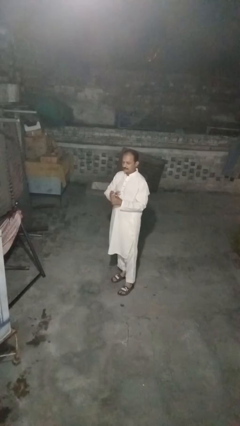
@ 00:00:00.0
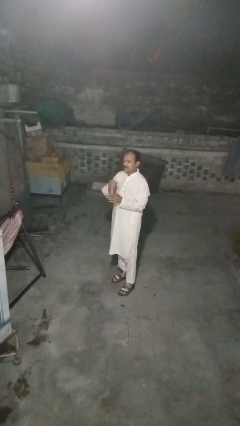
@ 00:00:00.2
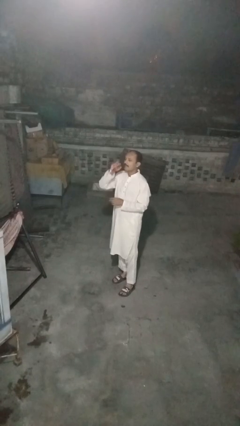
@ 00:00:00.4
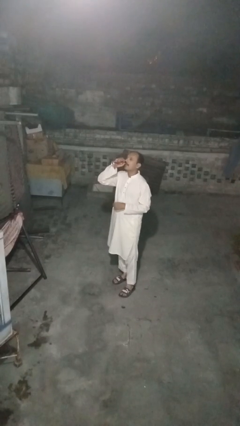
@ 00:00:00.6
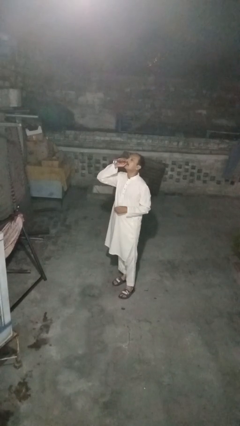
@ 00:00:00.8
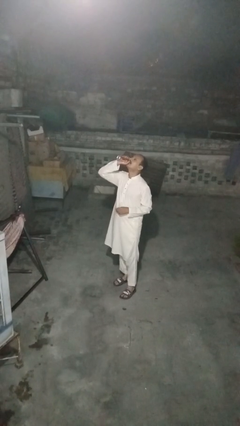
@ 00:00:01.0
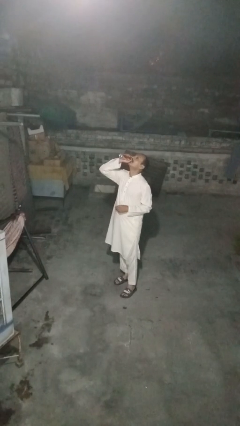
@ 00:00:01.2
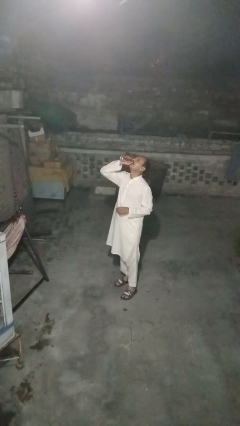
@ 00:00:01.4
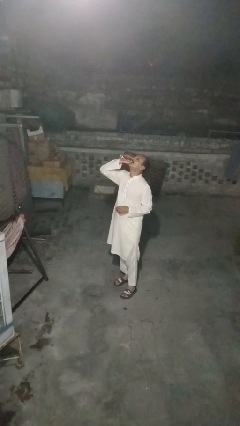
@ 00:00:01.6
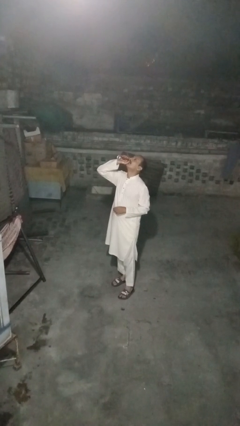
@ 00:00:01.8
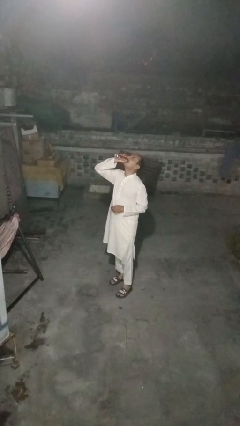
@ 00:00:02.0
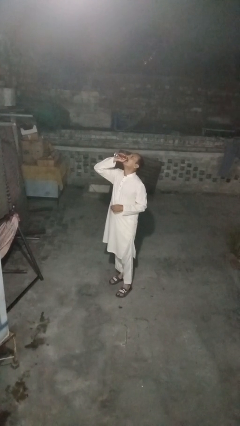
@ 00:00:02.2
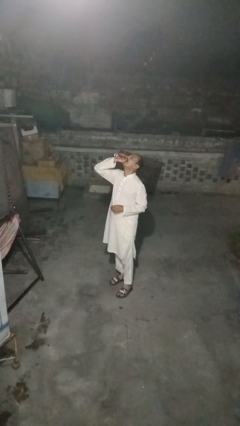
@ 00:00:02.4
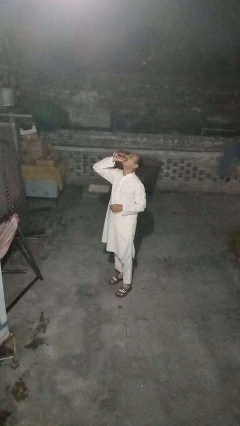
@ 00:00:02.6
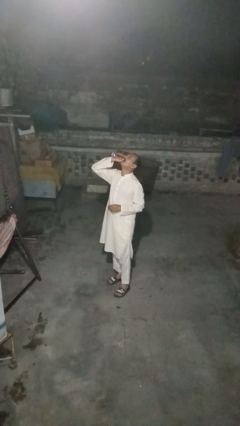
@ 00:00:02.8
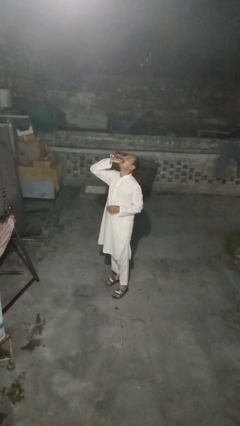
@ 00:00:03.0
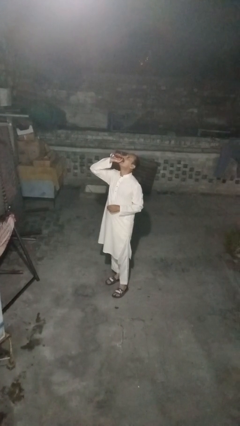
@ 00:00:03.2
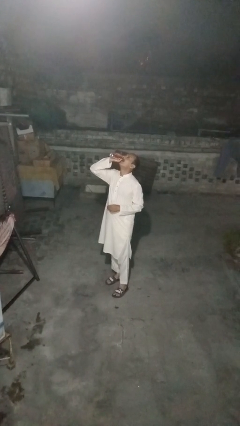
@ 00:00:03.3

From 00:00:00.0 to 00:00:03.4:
person drinks from beverage can

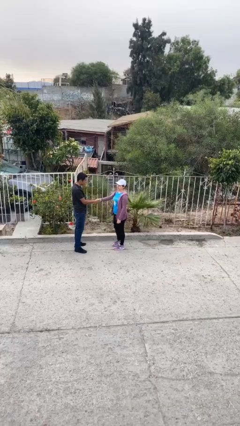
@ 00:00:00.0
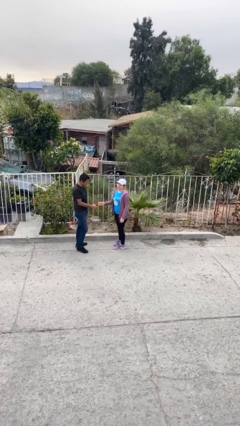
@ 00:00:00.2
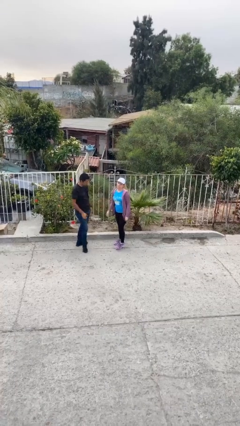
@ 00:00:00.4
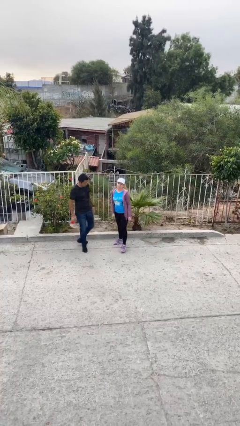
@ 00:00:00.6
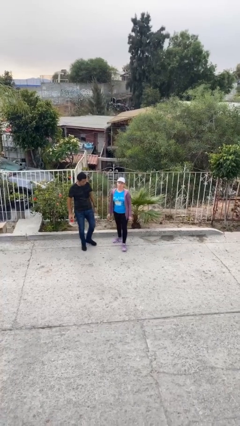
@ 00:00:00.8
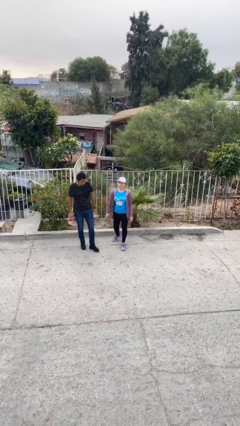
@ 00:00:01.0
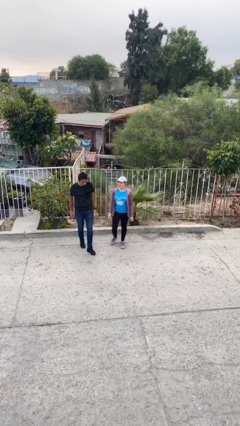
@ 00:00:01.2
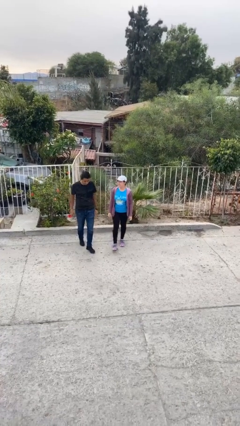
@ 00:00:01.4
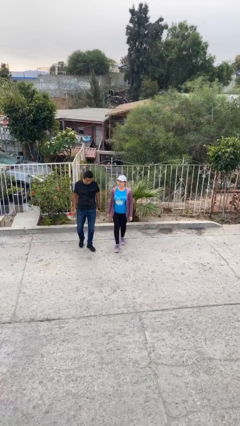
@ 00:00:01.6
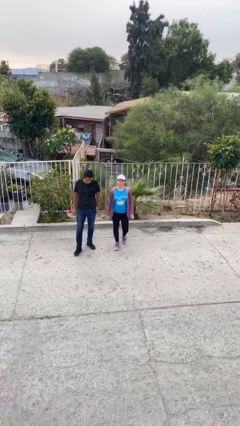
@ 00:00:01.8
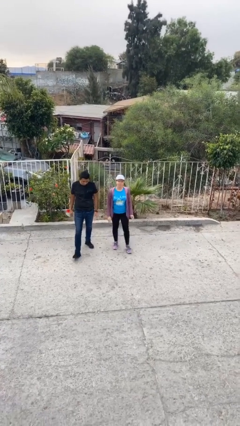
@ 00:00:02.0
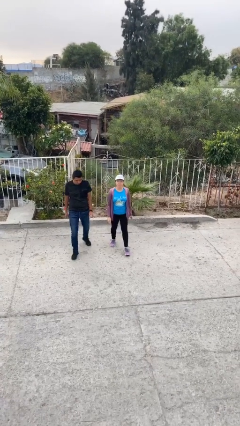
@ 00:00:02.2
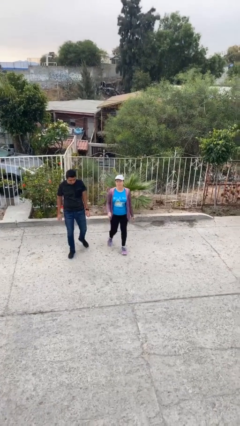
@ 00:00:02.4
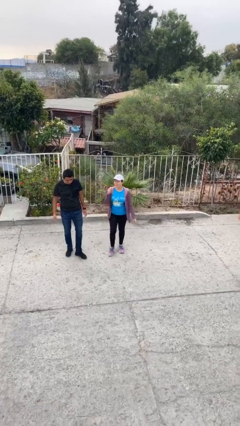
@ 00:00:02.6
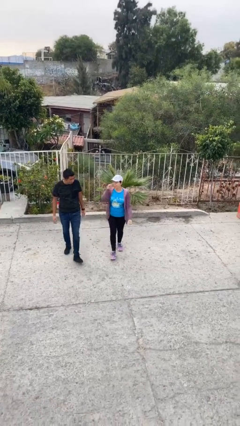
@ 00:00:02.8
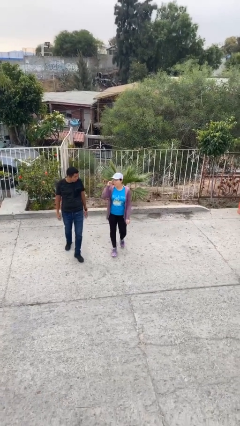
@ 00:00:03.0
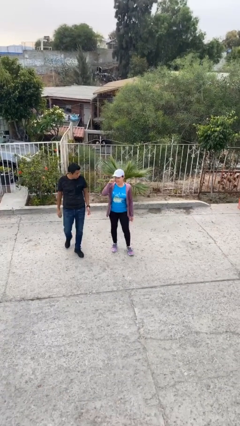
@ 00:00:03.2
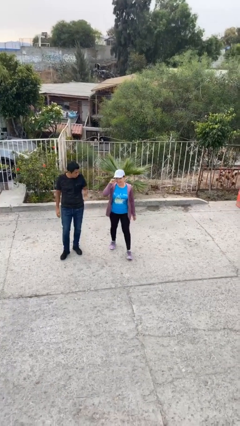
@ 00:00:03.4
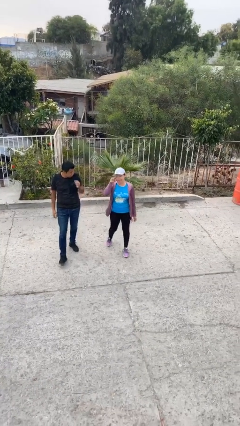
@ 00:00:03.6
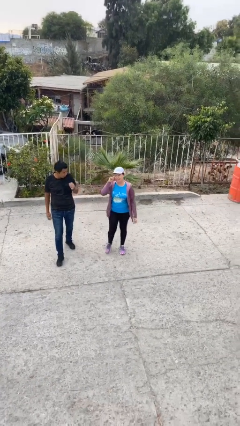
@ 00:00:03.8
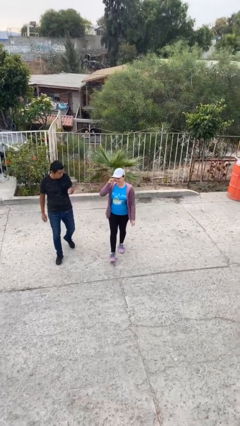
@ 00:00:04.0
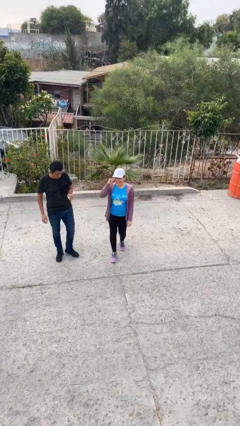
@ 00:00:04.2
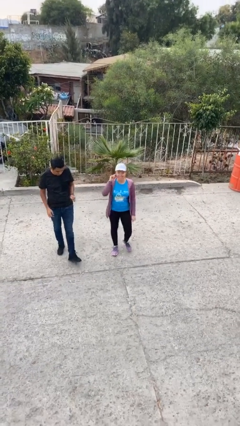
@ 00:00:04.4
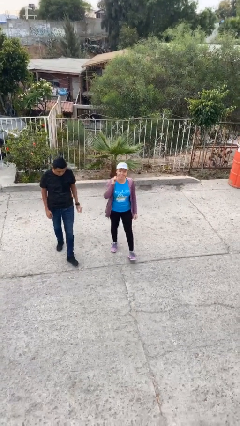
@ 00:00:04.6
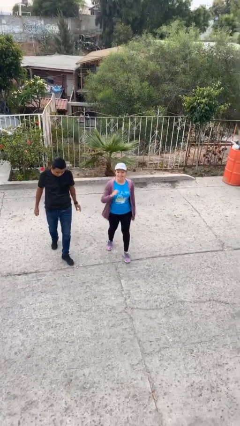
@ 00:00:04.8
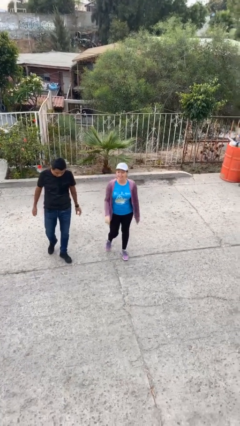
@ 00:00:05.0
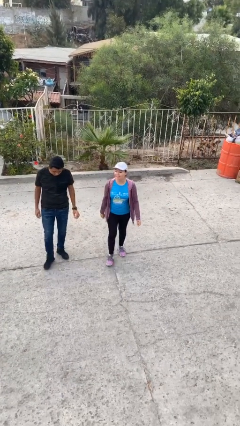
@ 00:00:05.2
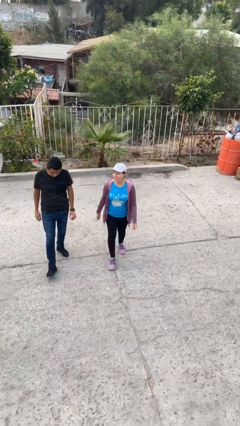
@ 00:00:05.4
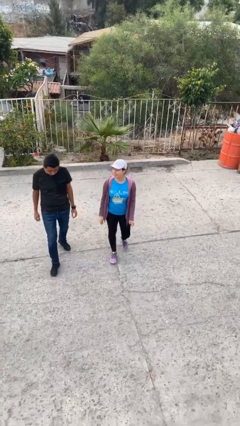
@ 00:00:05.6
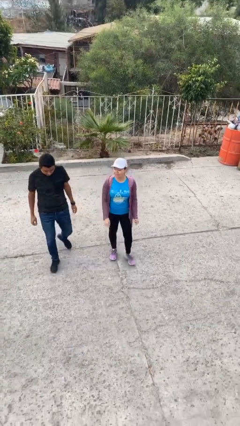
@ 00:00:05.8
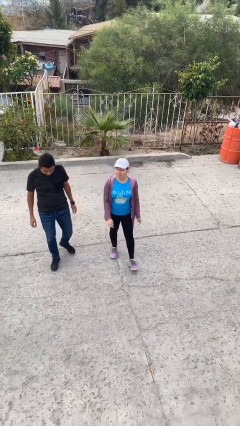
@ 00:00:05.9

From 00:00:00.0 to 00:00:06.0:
person talks to person

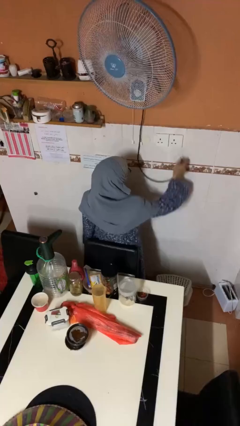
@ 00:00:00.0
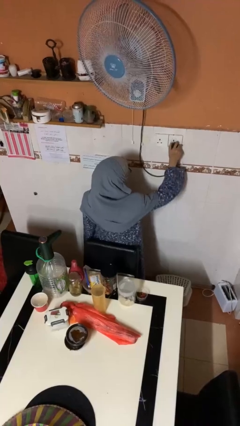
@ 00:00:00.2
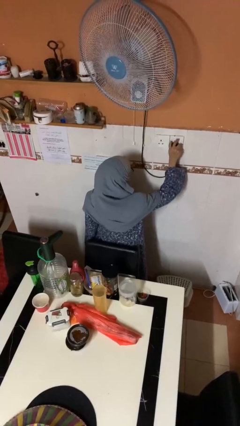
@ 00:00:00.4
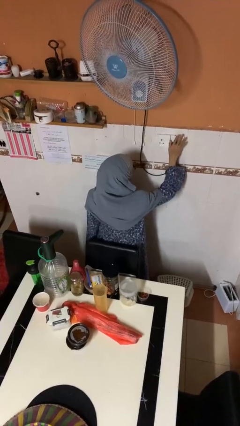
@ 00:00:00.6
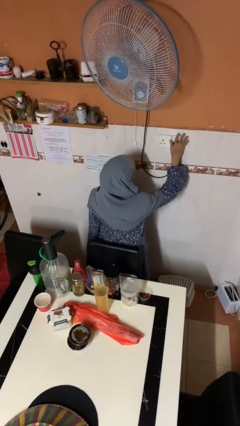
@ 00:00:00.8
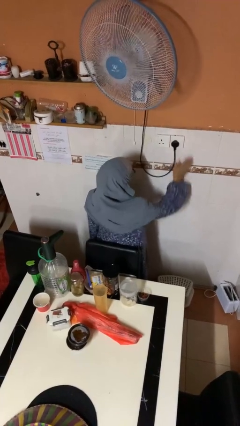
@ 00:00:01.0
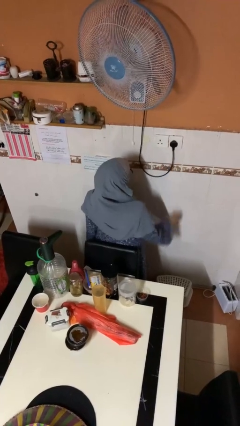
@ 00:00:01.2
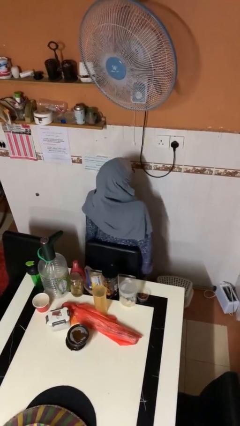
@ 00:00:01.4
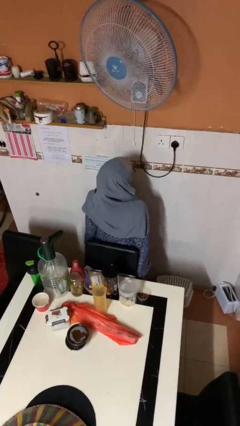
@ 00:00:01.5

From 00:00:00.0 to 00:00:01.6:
person plugs into electrical socket

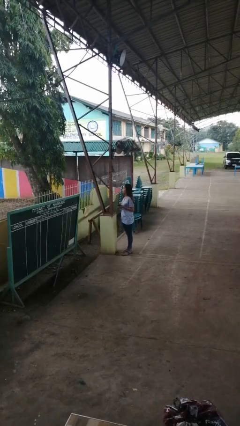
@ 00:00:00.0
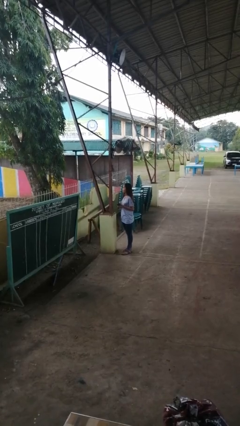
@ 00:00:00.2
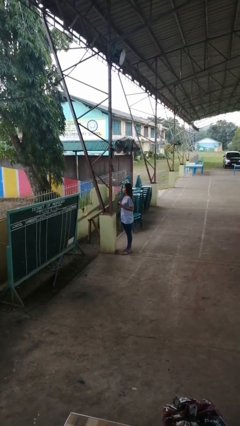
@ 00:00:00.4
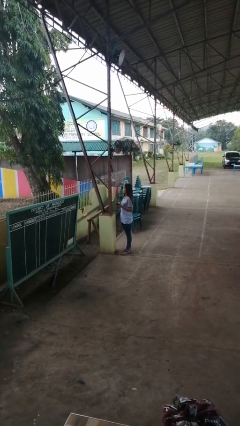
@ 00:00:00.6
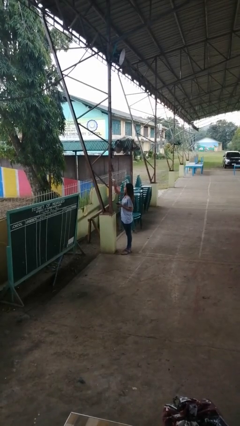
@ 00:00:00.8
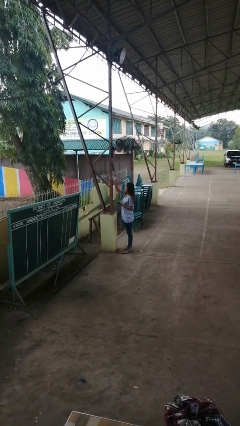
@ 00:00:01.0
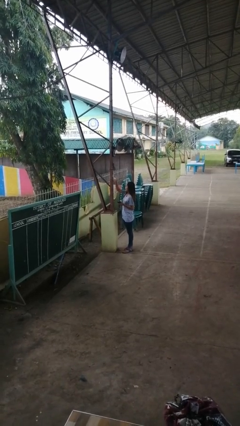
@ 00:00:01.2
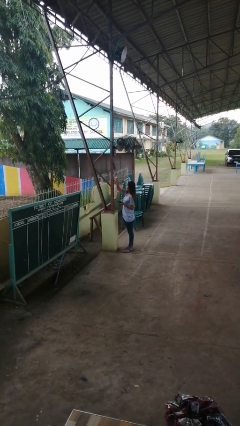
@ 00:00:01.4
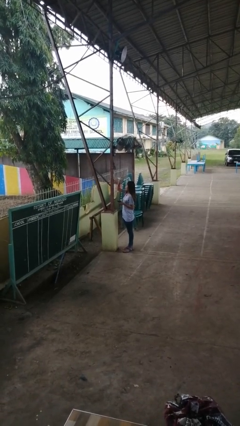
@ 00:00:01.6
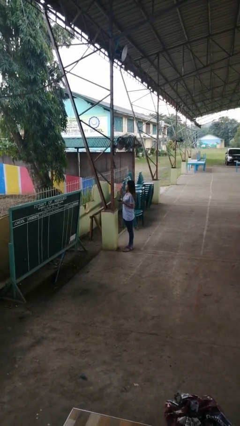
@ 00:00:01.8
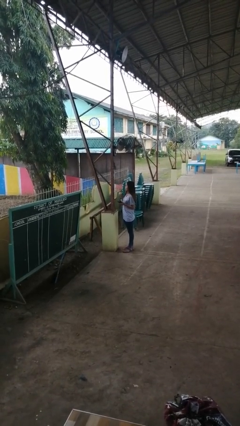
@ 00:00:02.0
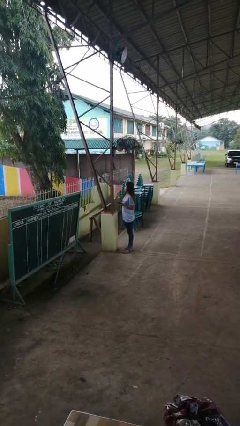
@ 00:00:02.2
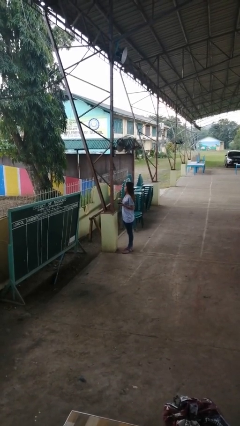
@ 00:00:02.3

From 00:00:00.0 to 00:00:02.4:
person unplugs from electrical socket

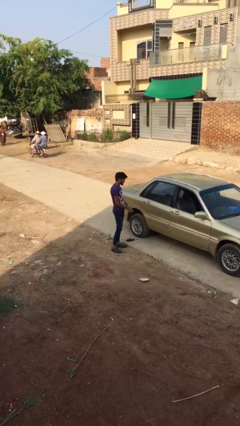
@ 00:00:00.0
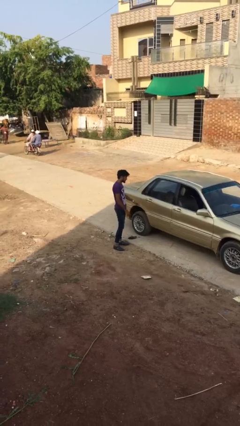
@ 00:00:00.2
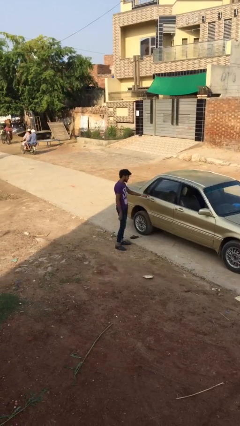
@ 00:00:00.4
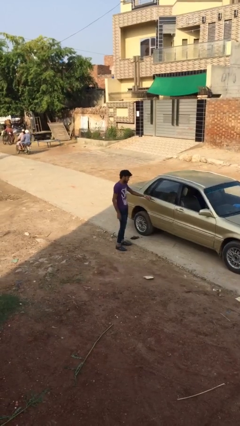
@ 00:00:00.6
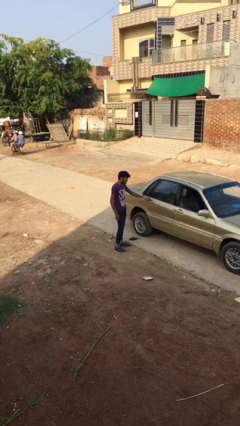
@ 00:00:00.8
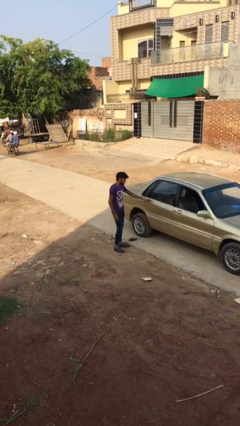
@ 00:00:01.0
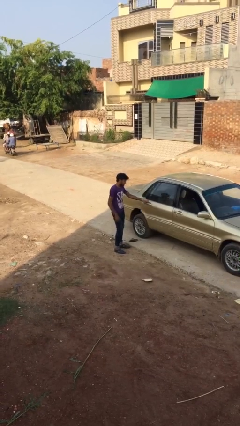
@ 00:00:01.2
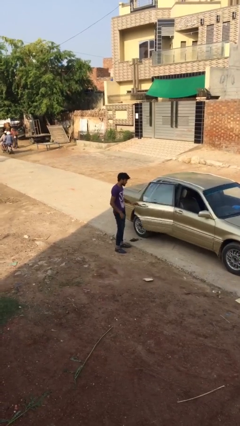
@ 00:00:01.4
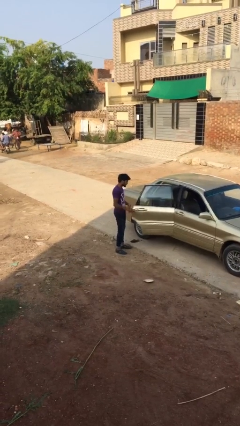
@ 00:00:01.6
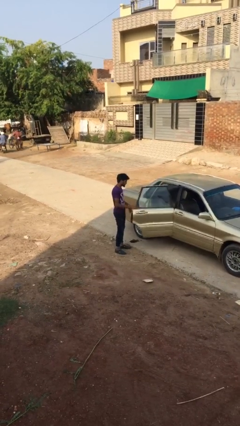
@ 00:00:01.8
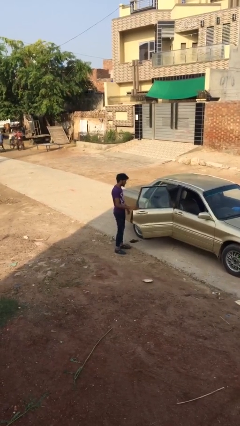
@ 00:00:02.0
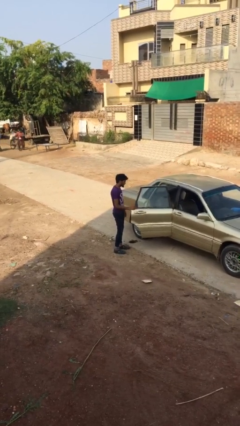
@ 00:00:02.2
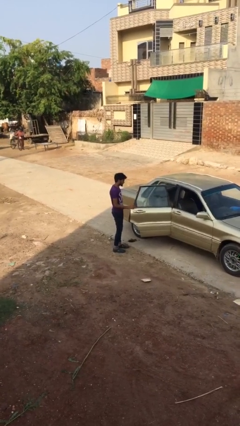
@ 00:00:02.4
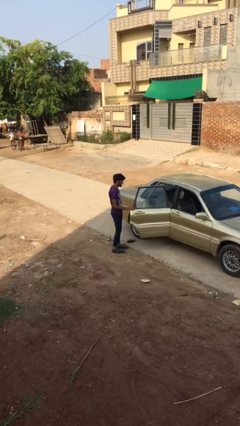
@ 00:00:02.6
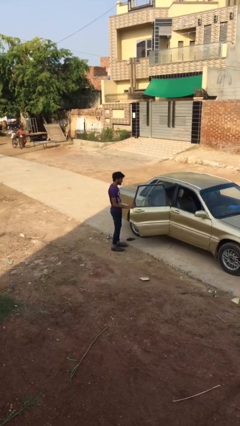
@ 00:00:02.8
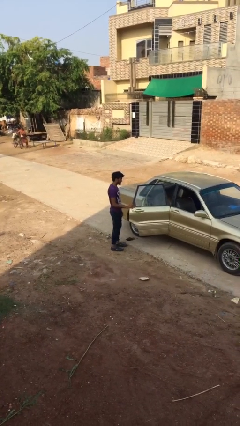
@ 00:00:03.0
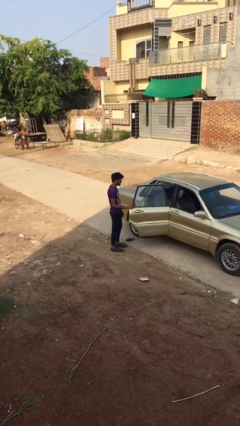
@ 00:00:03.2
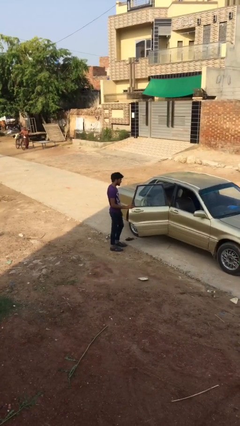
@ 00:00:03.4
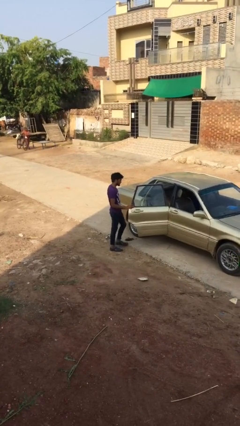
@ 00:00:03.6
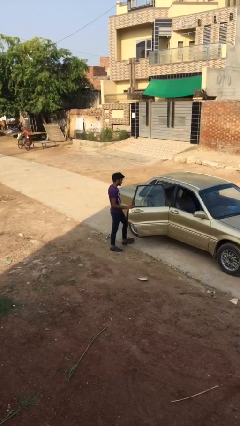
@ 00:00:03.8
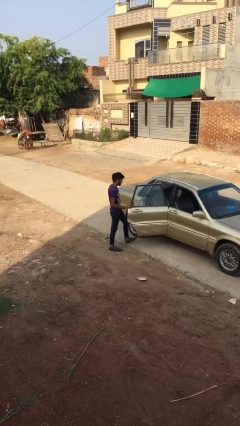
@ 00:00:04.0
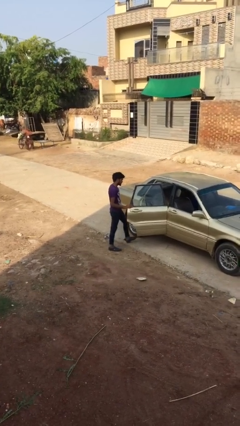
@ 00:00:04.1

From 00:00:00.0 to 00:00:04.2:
person opens car door
